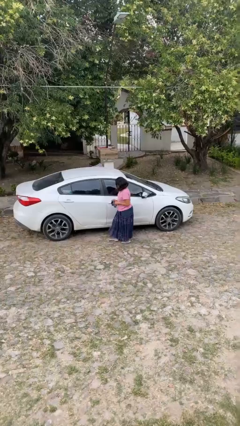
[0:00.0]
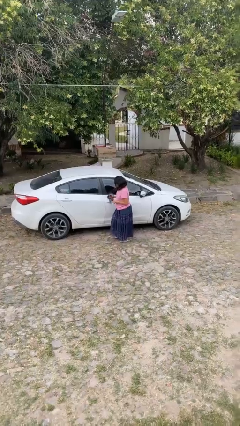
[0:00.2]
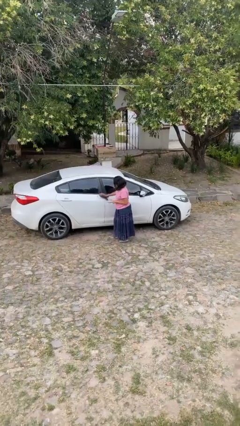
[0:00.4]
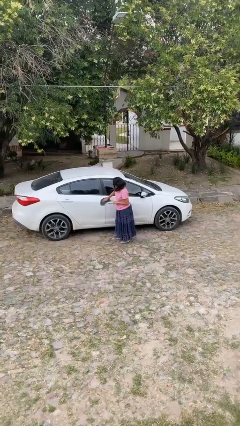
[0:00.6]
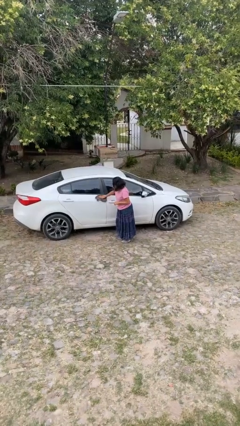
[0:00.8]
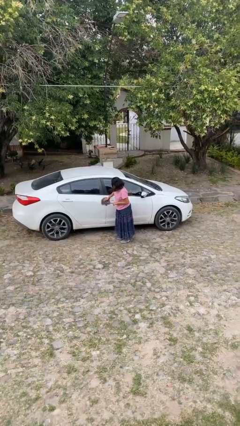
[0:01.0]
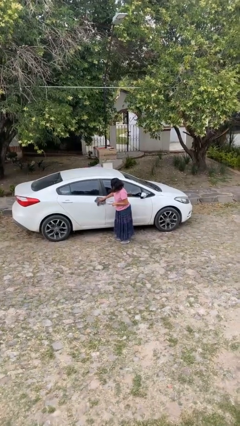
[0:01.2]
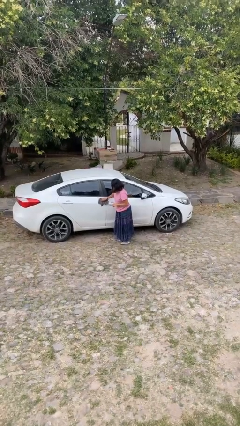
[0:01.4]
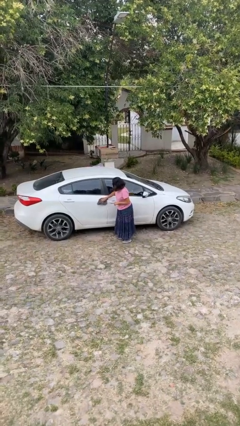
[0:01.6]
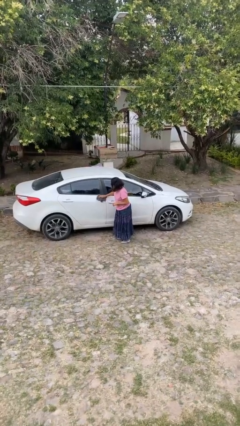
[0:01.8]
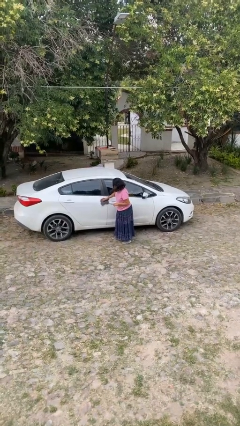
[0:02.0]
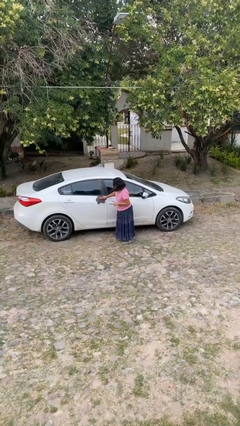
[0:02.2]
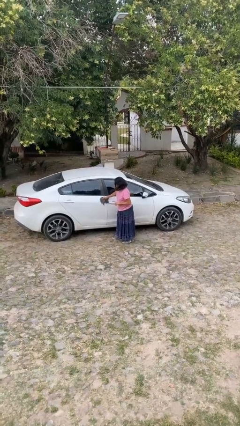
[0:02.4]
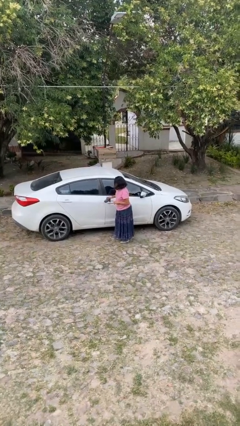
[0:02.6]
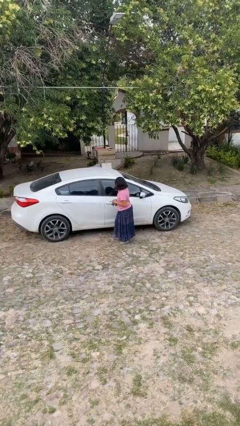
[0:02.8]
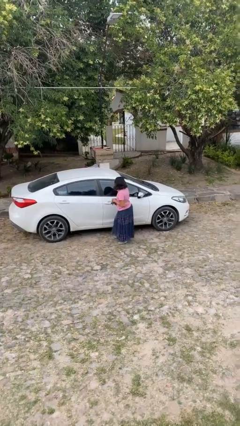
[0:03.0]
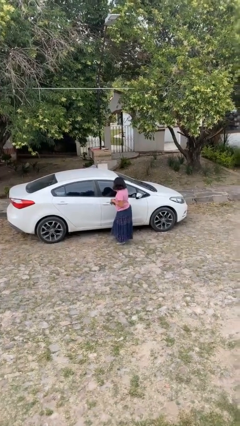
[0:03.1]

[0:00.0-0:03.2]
person polishes car with rag

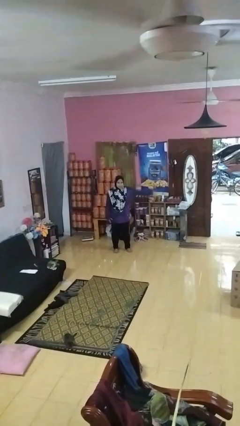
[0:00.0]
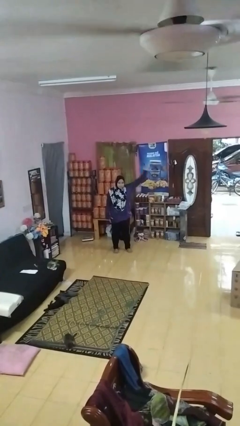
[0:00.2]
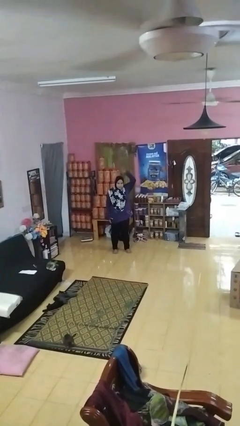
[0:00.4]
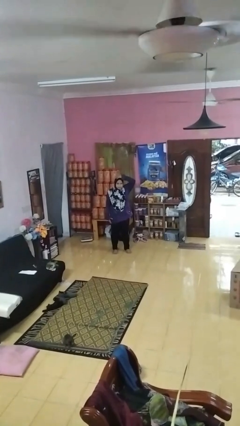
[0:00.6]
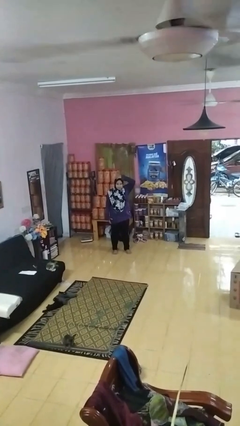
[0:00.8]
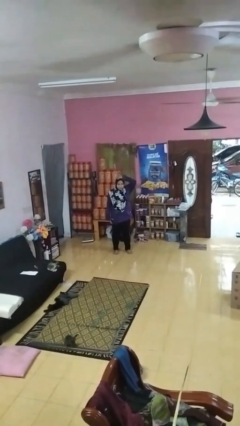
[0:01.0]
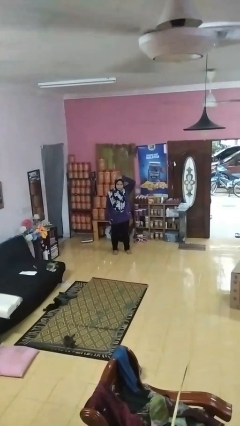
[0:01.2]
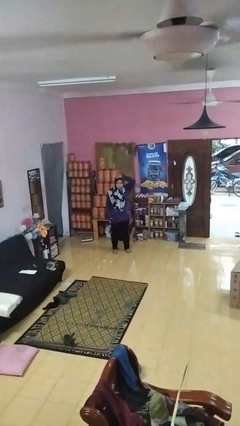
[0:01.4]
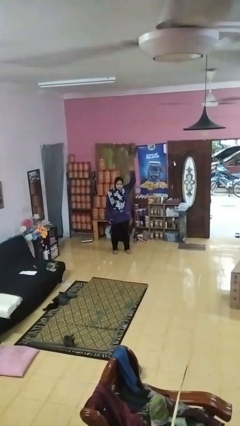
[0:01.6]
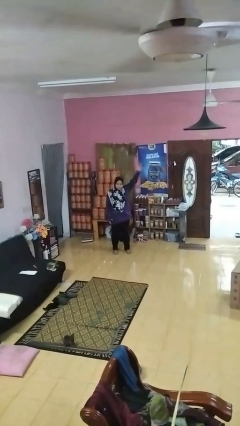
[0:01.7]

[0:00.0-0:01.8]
person pats head

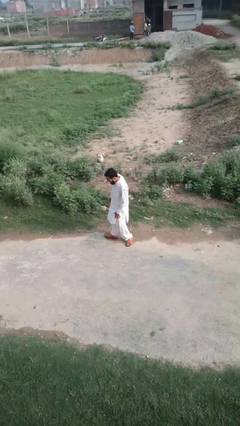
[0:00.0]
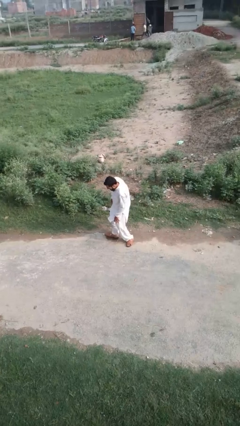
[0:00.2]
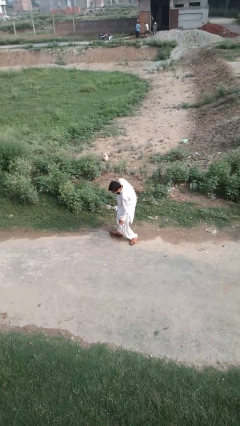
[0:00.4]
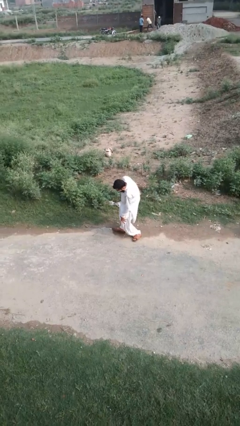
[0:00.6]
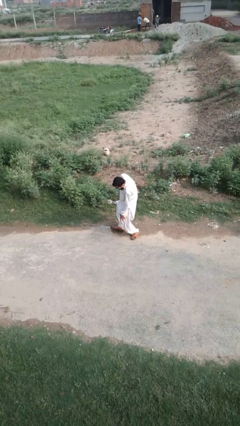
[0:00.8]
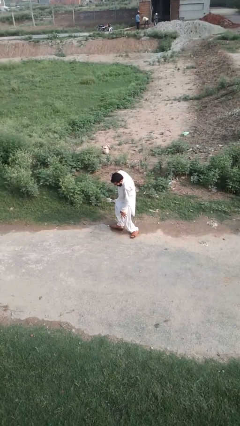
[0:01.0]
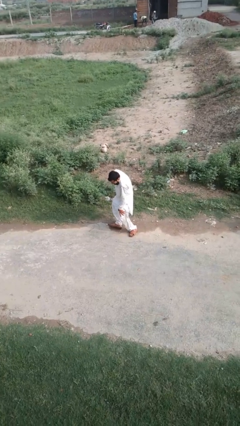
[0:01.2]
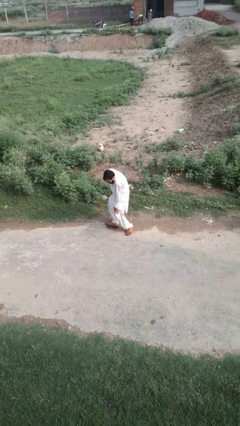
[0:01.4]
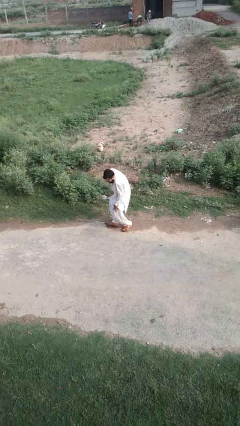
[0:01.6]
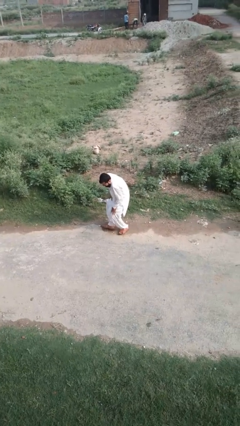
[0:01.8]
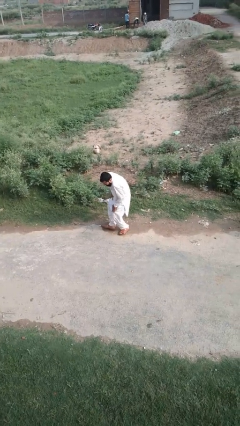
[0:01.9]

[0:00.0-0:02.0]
person trips on object on floor

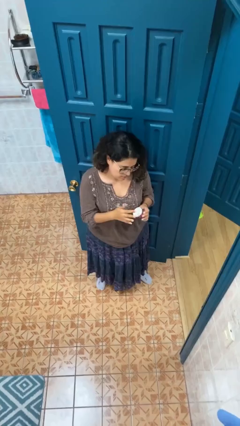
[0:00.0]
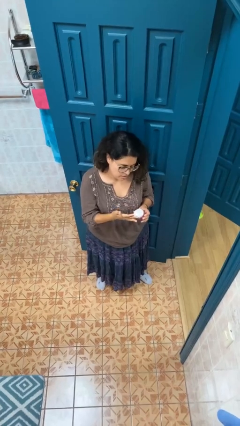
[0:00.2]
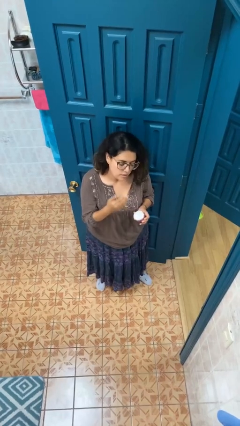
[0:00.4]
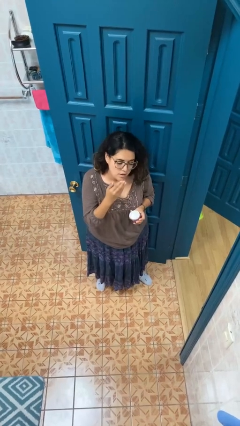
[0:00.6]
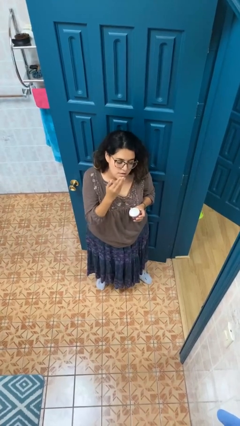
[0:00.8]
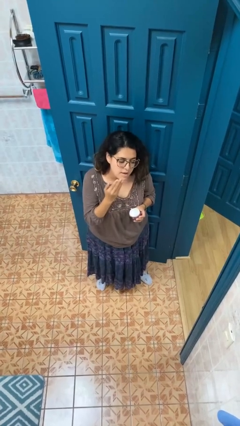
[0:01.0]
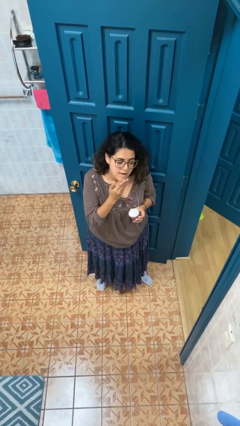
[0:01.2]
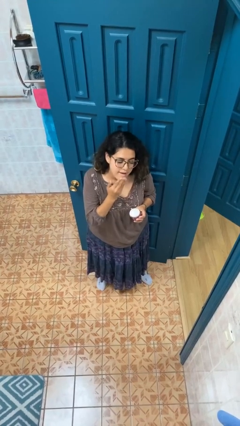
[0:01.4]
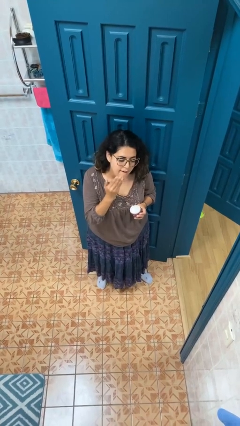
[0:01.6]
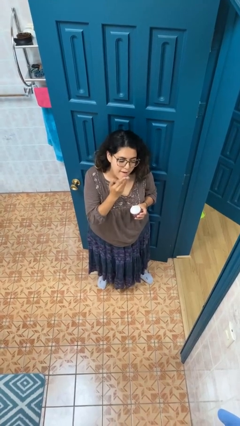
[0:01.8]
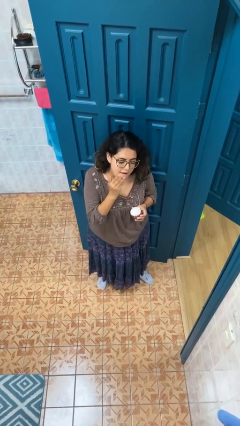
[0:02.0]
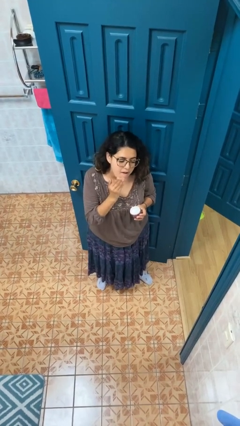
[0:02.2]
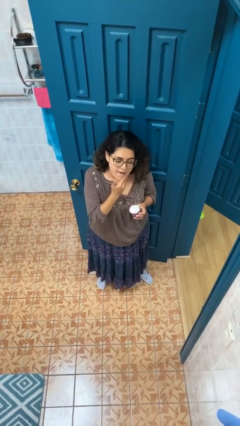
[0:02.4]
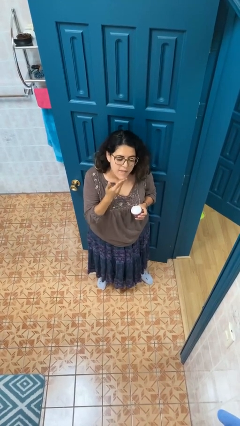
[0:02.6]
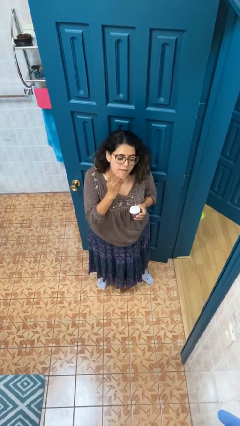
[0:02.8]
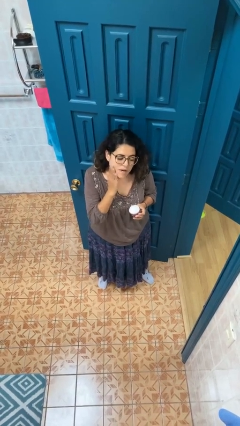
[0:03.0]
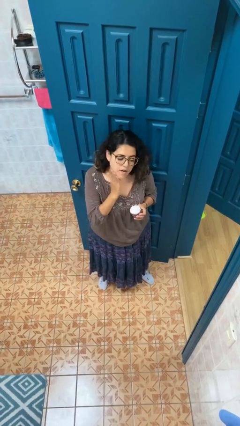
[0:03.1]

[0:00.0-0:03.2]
person applies facial moisturizer

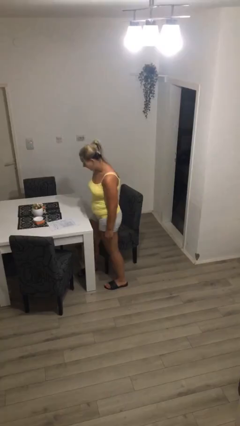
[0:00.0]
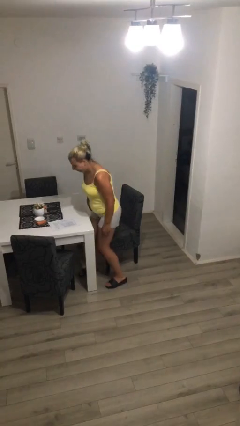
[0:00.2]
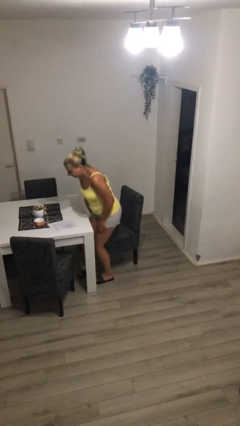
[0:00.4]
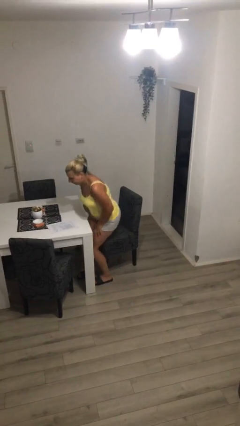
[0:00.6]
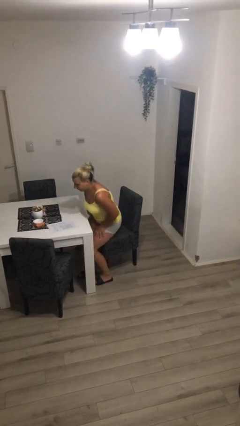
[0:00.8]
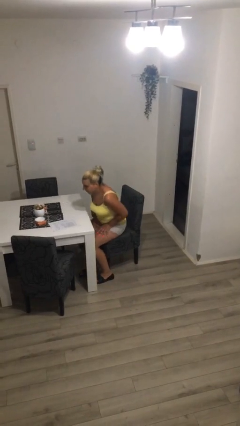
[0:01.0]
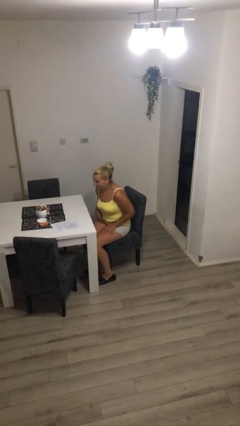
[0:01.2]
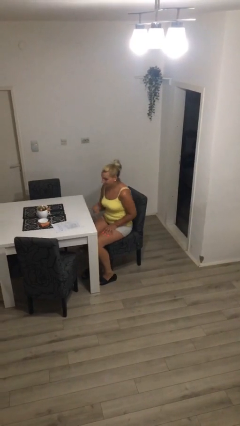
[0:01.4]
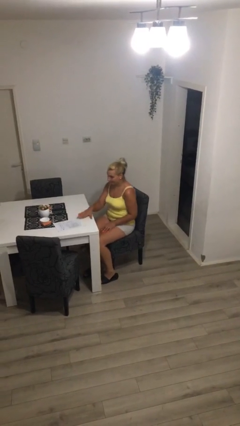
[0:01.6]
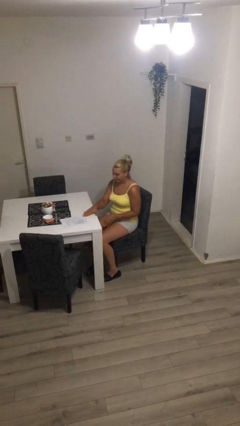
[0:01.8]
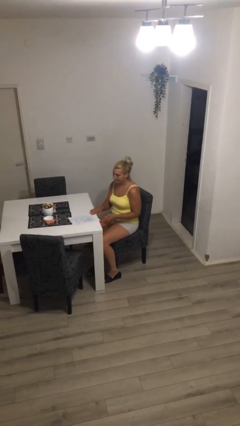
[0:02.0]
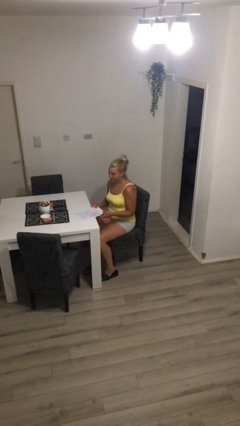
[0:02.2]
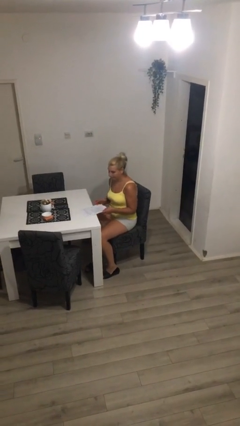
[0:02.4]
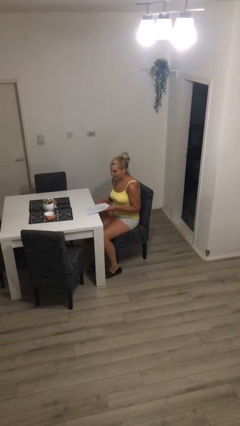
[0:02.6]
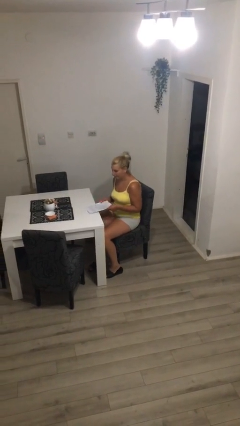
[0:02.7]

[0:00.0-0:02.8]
person sits down

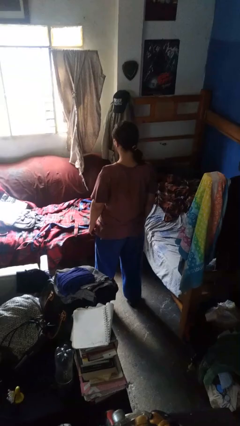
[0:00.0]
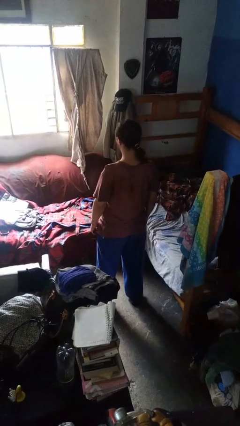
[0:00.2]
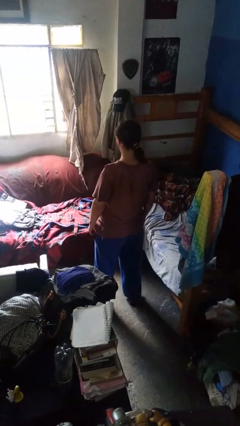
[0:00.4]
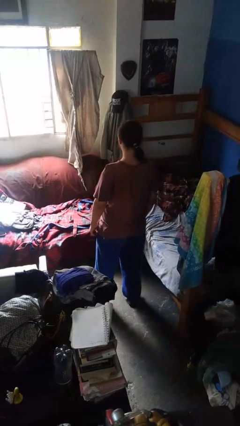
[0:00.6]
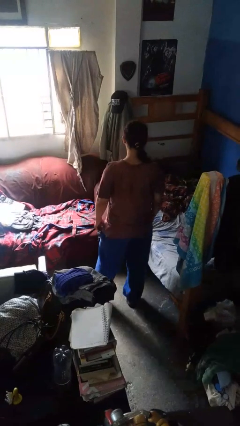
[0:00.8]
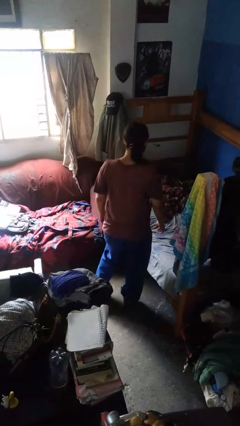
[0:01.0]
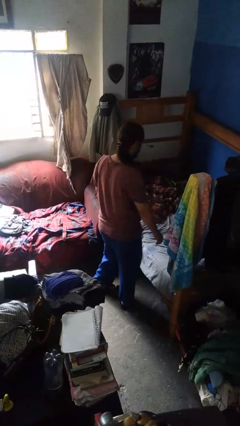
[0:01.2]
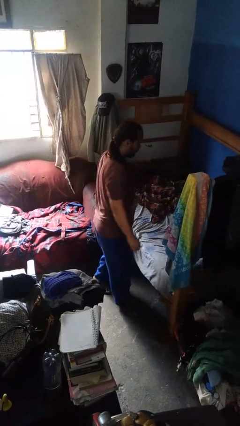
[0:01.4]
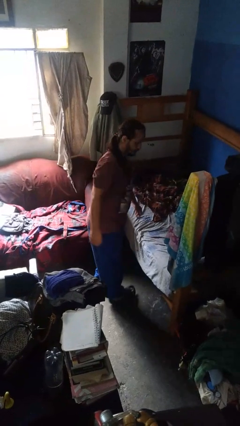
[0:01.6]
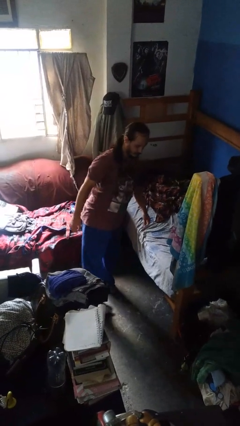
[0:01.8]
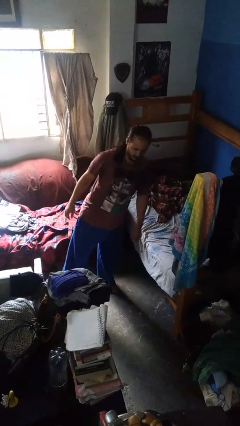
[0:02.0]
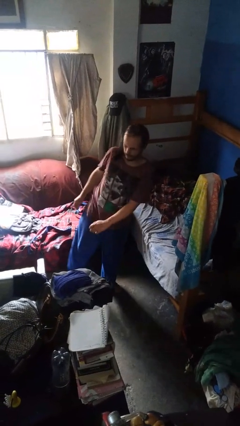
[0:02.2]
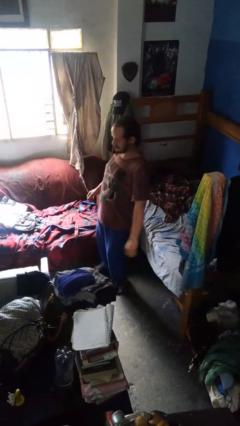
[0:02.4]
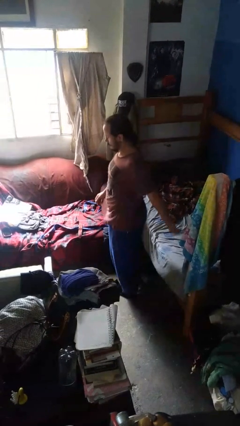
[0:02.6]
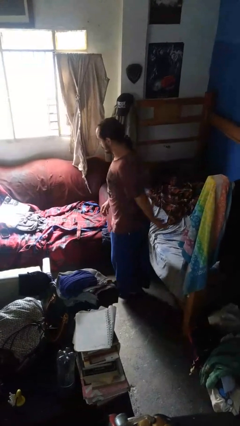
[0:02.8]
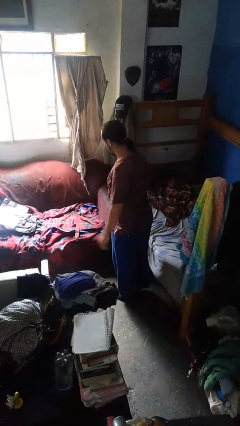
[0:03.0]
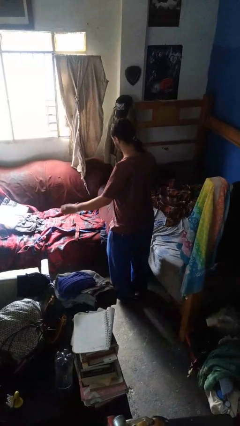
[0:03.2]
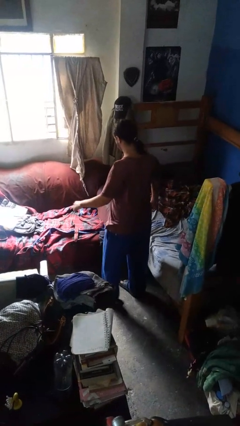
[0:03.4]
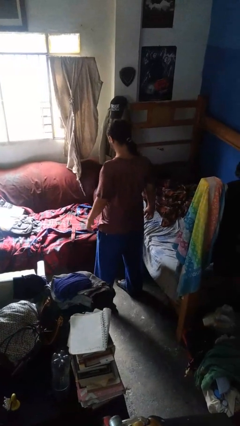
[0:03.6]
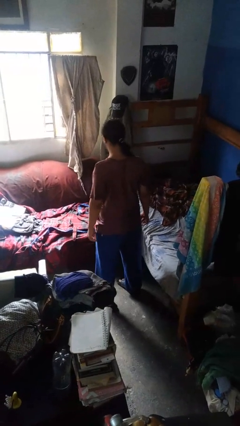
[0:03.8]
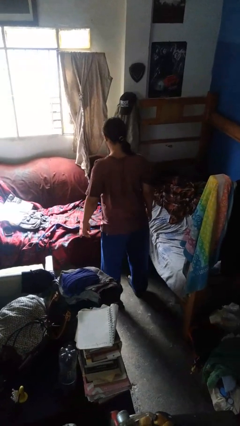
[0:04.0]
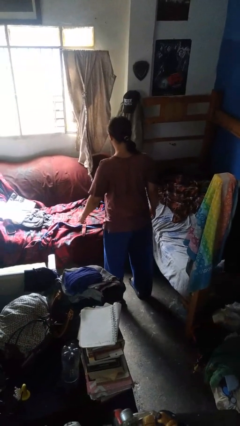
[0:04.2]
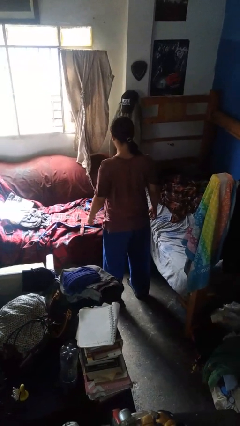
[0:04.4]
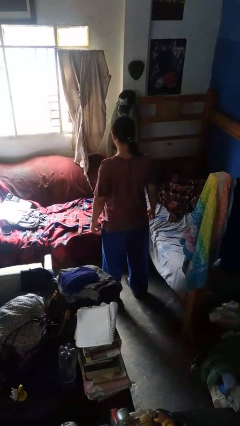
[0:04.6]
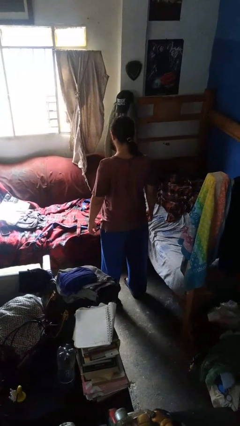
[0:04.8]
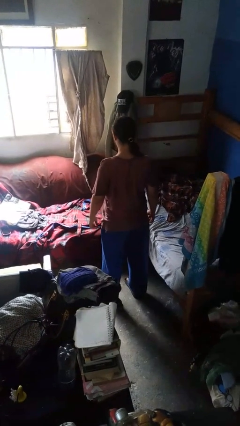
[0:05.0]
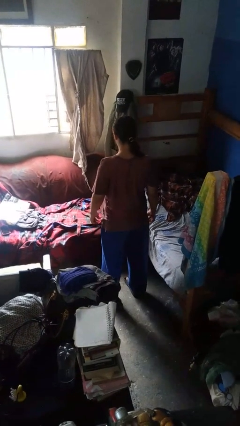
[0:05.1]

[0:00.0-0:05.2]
person twirls
